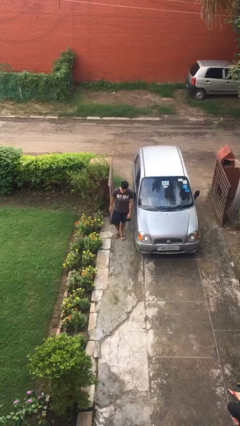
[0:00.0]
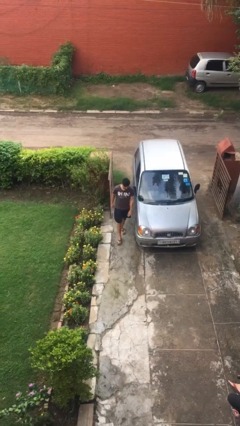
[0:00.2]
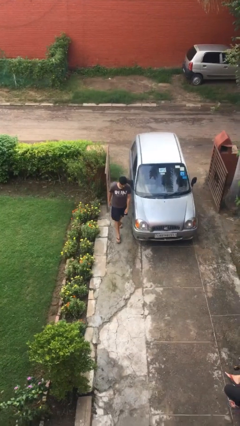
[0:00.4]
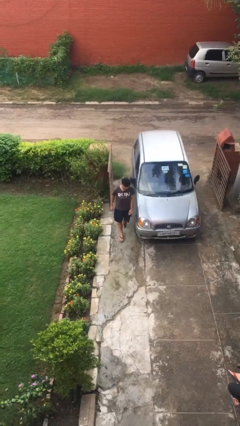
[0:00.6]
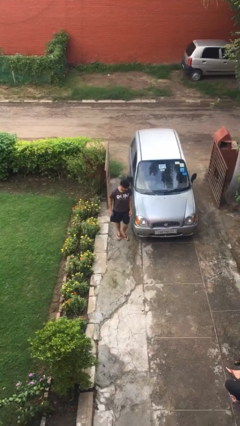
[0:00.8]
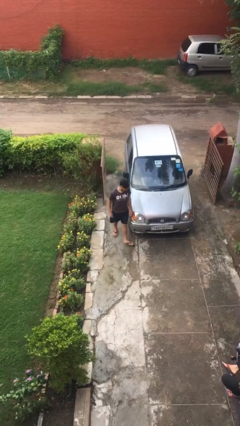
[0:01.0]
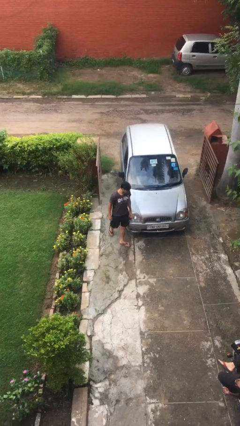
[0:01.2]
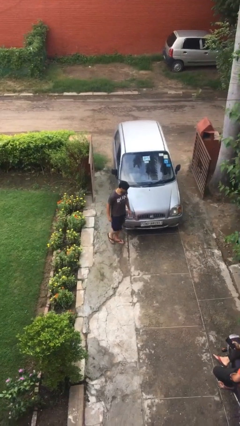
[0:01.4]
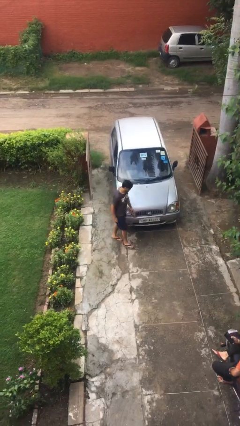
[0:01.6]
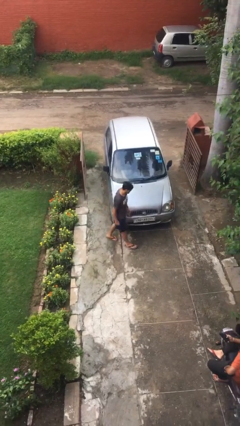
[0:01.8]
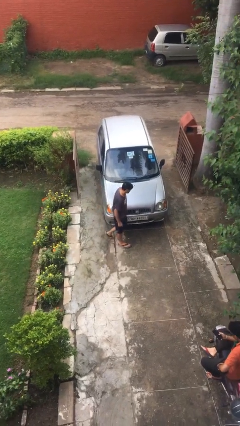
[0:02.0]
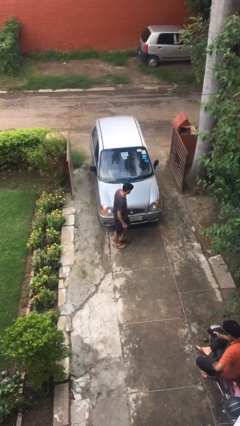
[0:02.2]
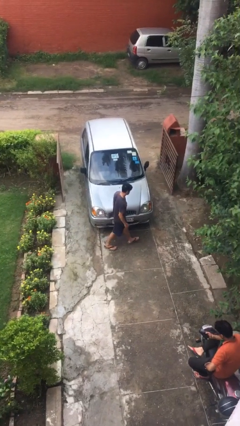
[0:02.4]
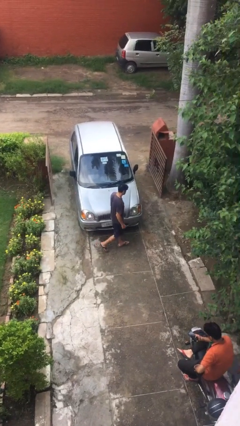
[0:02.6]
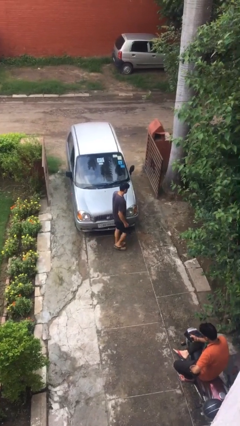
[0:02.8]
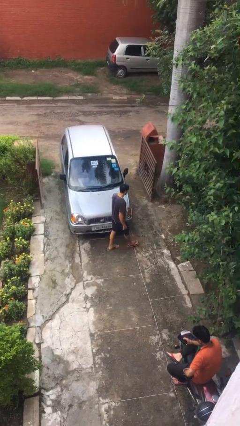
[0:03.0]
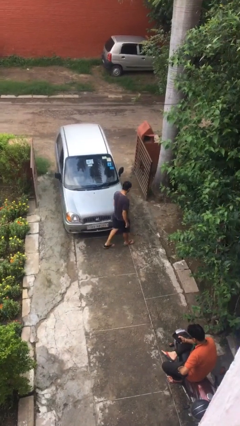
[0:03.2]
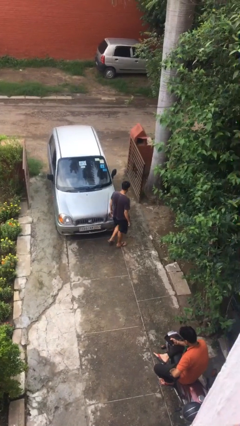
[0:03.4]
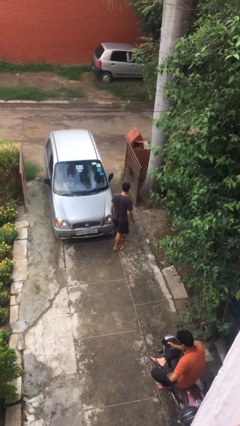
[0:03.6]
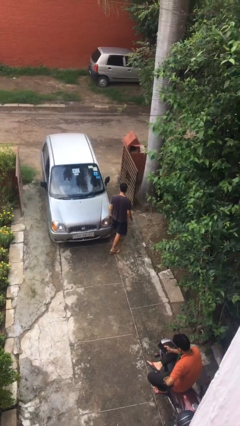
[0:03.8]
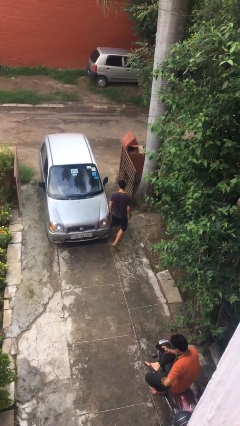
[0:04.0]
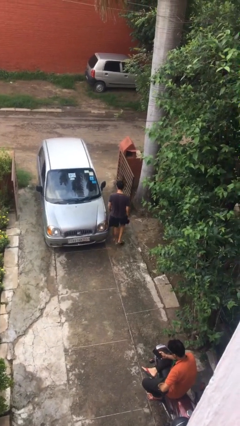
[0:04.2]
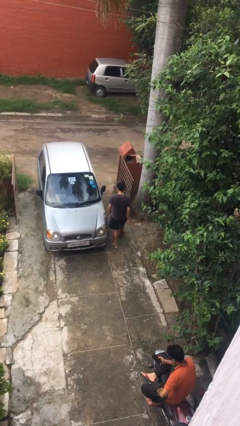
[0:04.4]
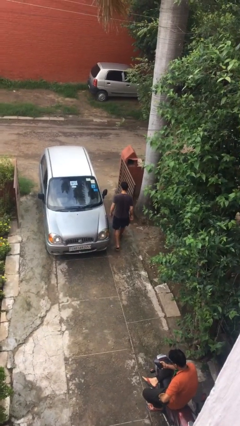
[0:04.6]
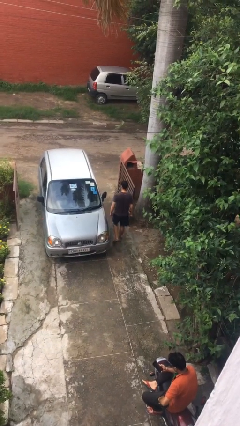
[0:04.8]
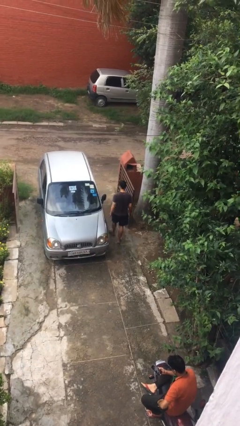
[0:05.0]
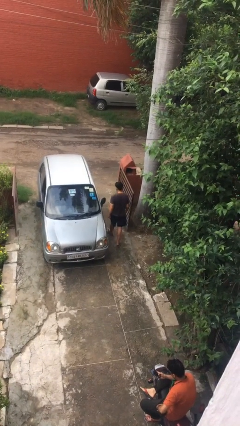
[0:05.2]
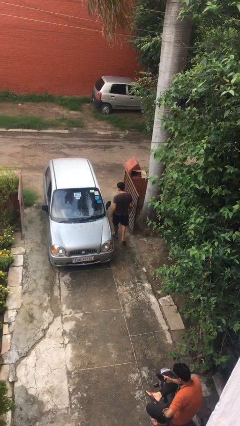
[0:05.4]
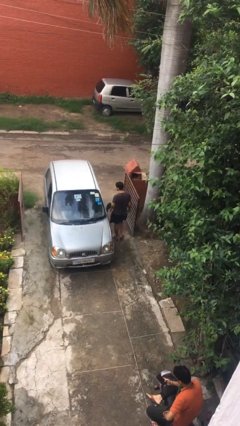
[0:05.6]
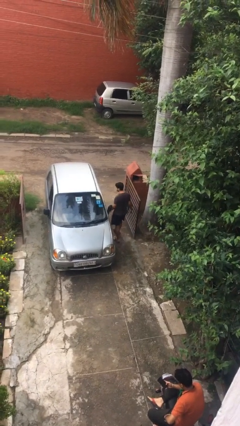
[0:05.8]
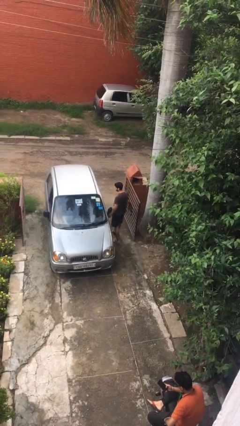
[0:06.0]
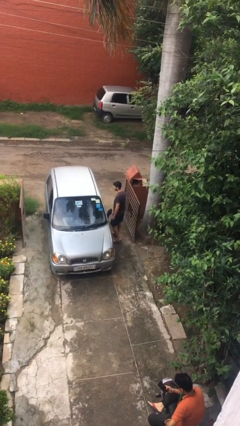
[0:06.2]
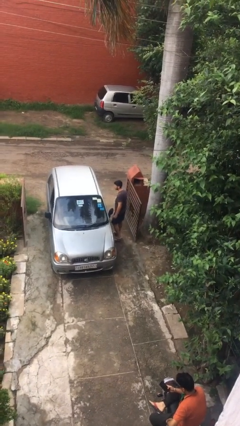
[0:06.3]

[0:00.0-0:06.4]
person walks around car

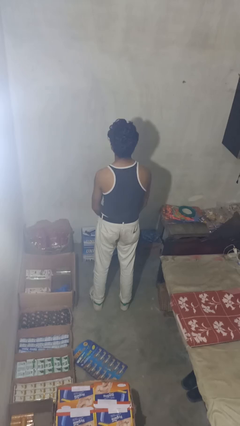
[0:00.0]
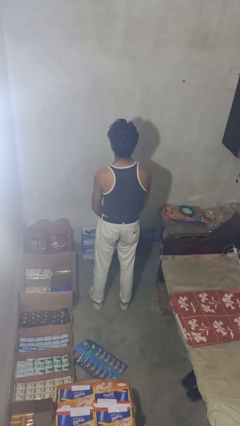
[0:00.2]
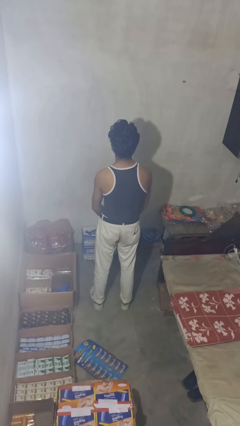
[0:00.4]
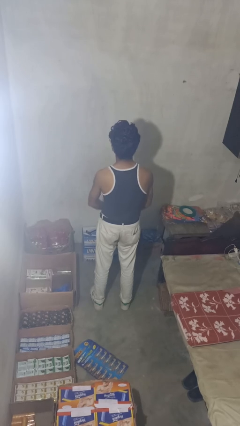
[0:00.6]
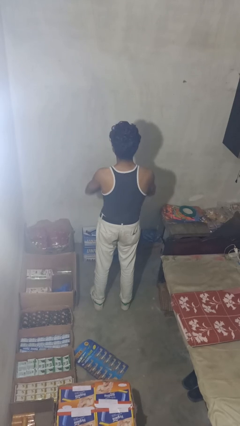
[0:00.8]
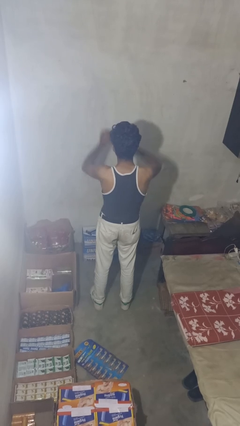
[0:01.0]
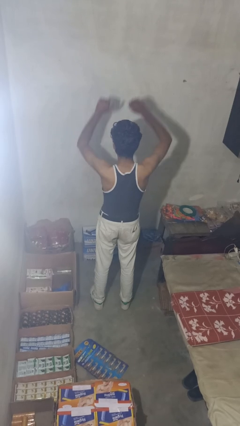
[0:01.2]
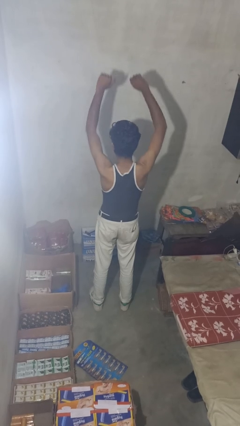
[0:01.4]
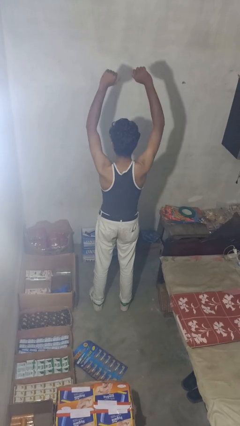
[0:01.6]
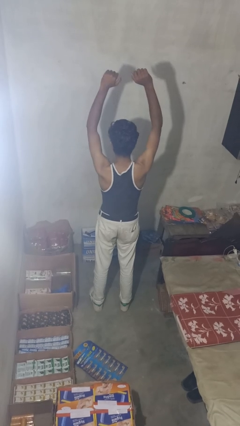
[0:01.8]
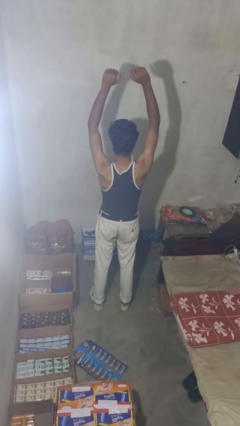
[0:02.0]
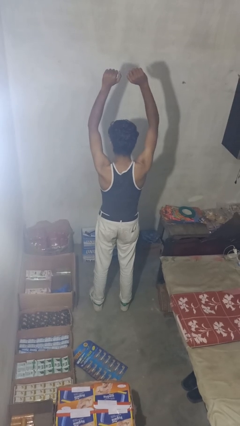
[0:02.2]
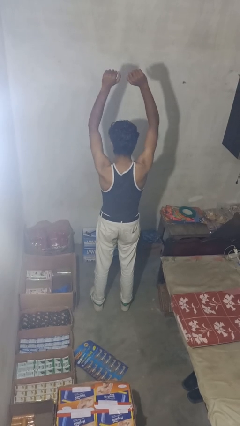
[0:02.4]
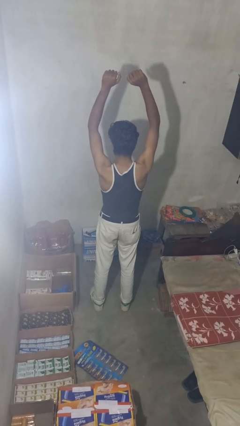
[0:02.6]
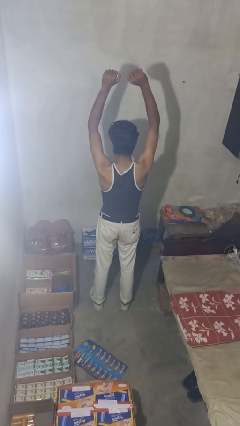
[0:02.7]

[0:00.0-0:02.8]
person handstand

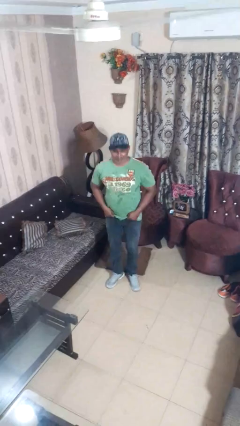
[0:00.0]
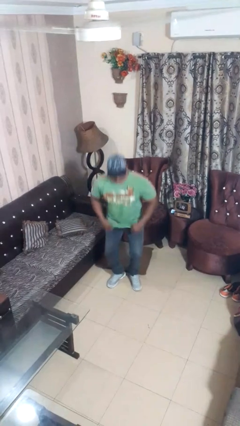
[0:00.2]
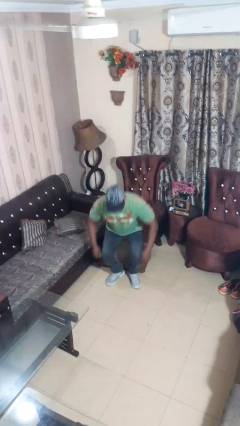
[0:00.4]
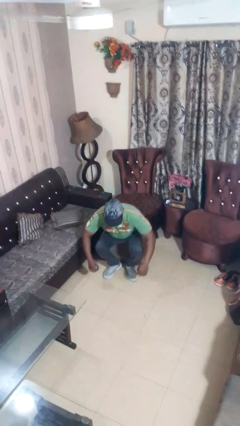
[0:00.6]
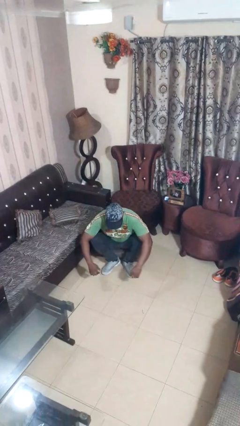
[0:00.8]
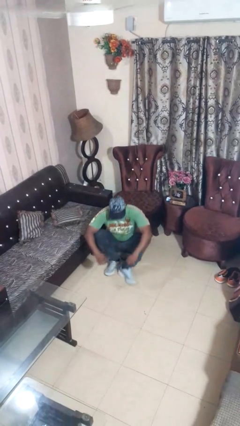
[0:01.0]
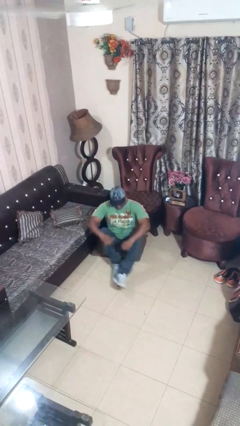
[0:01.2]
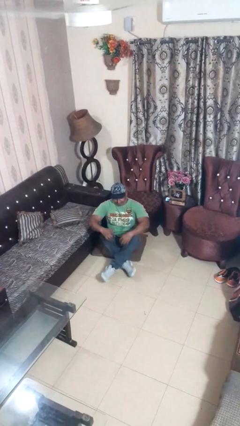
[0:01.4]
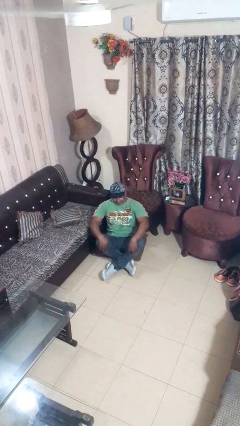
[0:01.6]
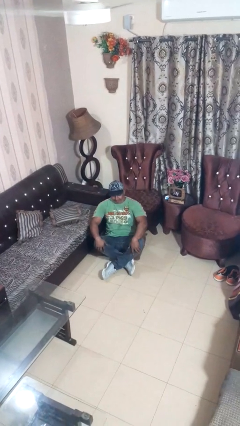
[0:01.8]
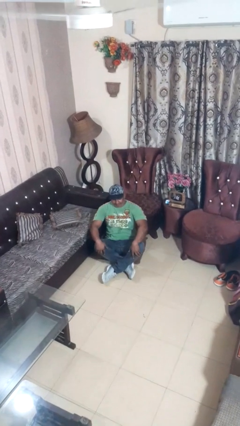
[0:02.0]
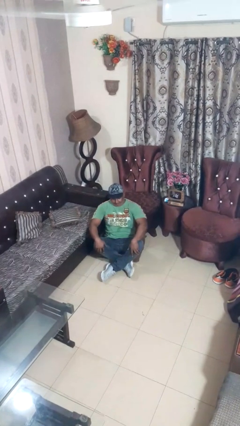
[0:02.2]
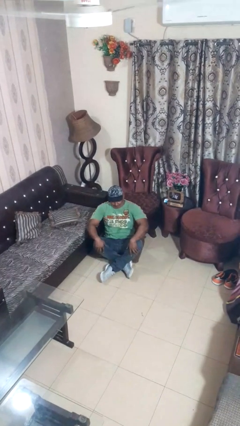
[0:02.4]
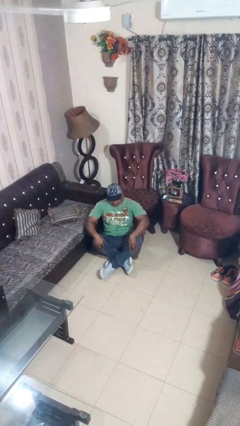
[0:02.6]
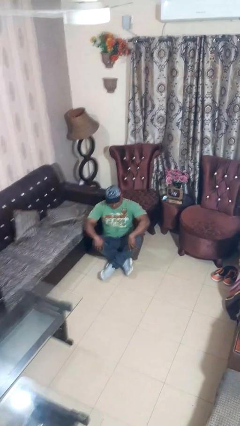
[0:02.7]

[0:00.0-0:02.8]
person sits crisscross

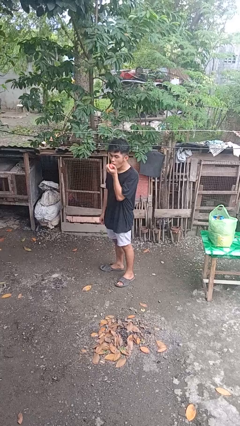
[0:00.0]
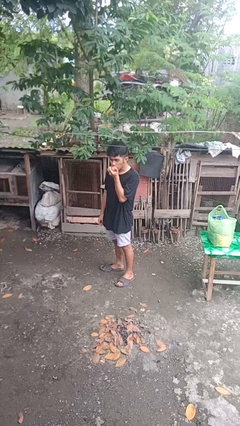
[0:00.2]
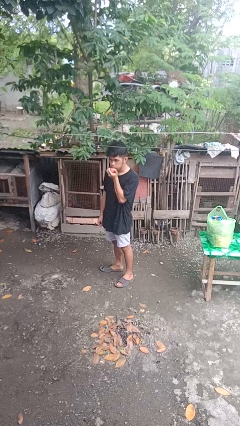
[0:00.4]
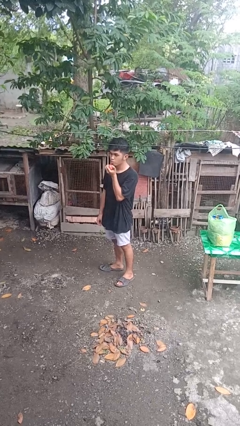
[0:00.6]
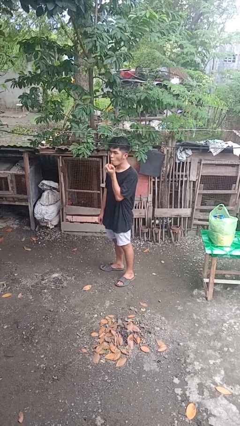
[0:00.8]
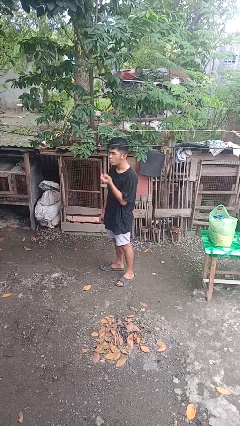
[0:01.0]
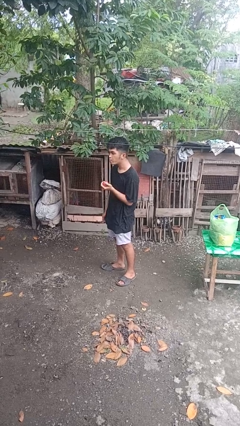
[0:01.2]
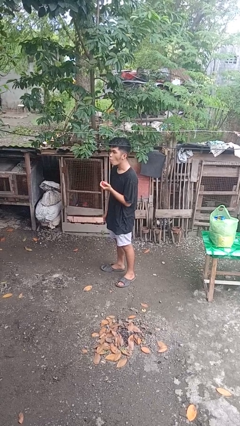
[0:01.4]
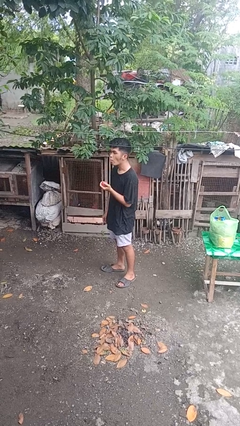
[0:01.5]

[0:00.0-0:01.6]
person eats apple

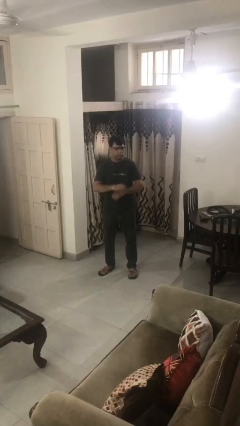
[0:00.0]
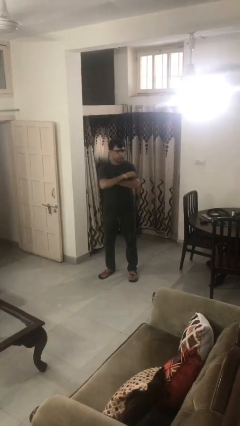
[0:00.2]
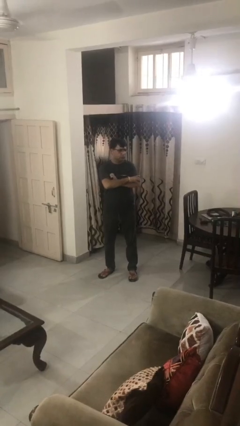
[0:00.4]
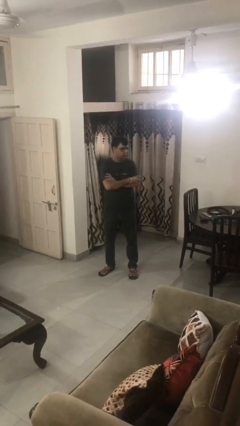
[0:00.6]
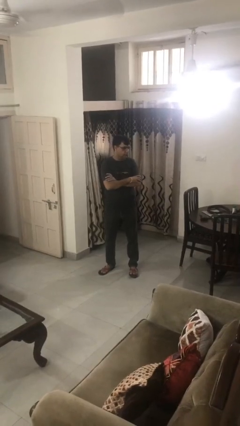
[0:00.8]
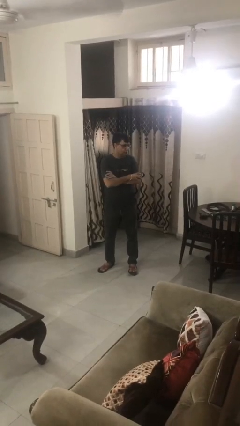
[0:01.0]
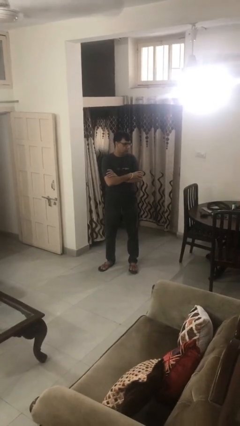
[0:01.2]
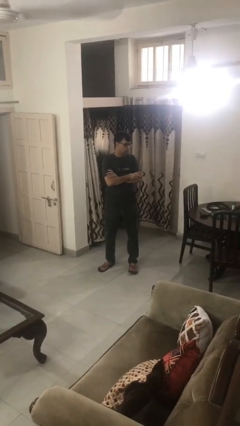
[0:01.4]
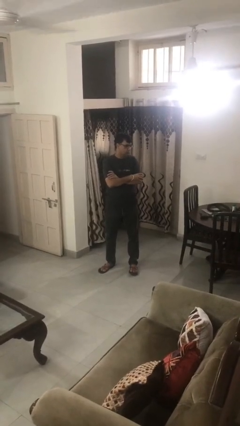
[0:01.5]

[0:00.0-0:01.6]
person crosses arms

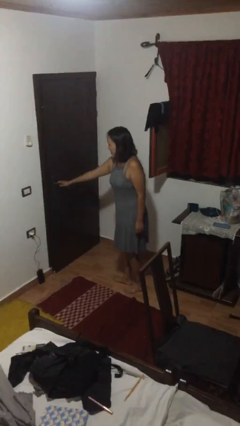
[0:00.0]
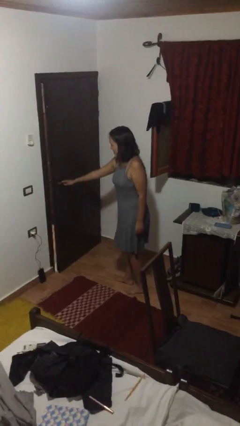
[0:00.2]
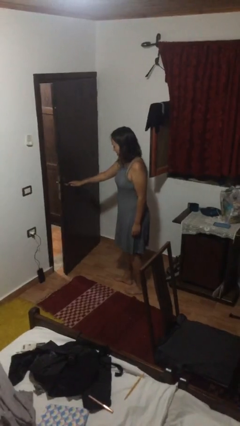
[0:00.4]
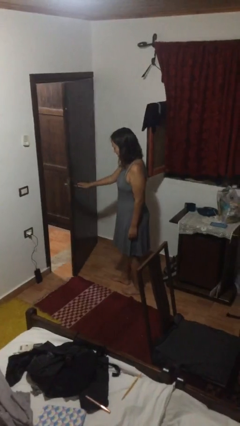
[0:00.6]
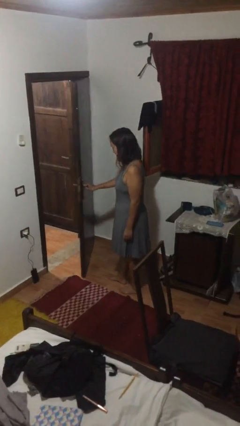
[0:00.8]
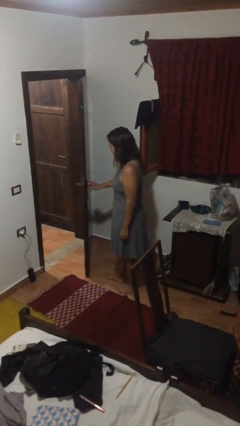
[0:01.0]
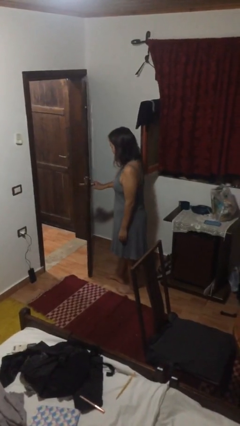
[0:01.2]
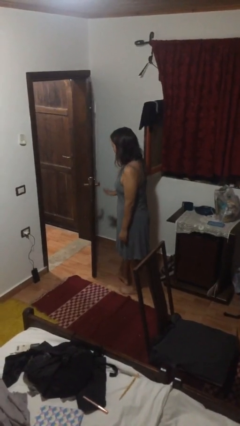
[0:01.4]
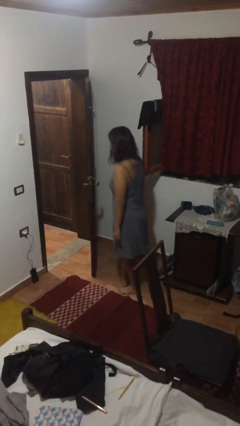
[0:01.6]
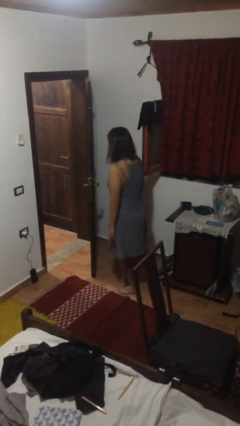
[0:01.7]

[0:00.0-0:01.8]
person opens facility door

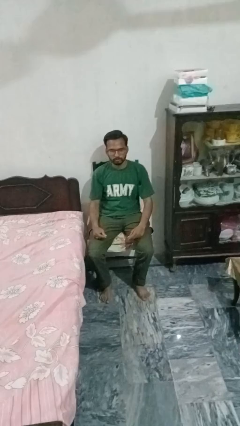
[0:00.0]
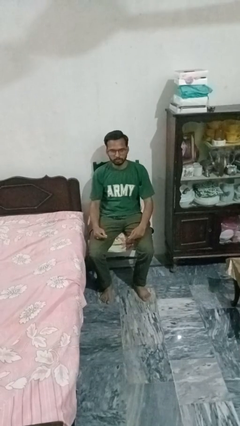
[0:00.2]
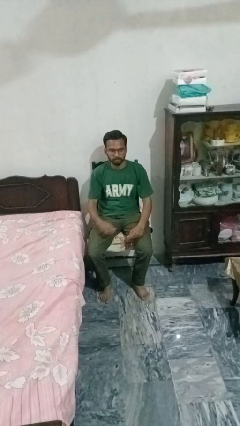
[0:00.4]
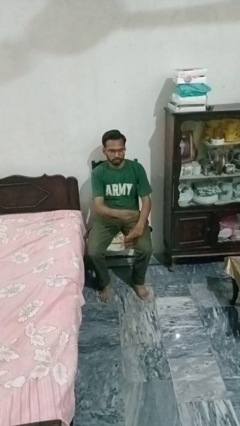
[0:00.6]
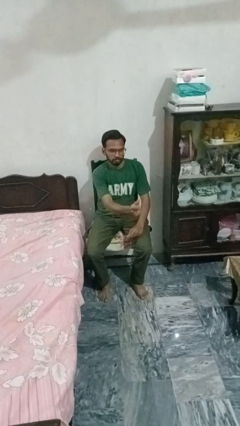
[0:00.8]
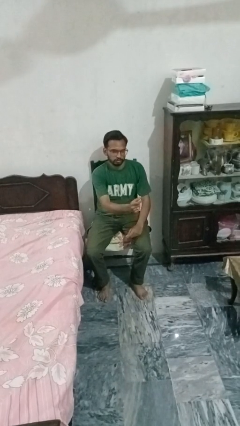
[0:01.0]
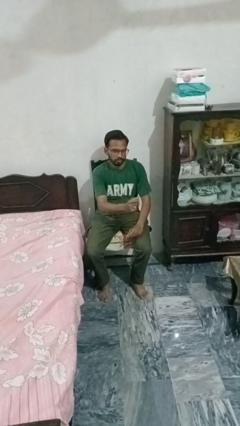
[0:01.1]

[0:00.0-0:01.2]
person snaps fingers
